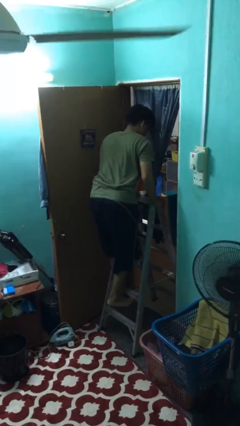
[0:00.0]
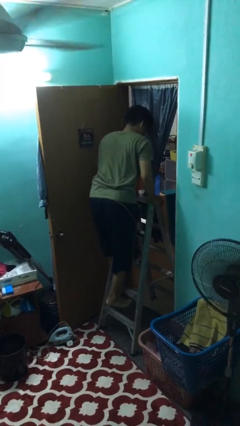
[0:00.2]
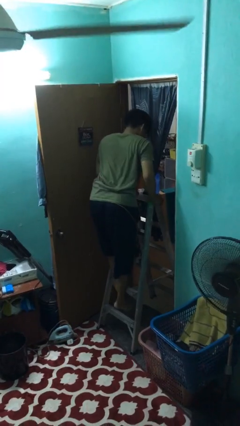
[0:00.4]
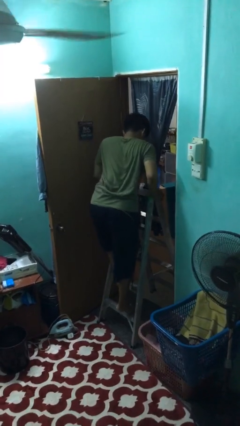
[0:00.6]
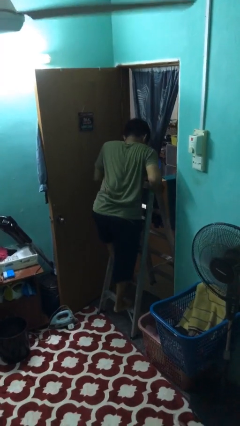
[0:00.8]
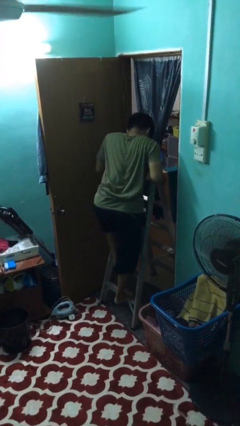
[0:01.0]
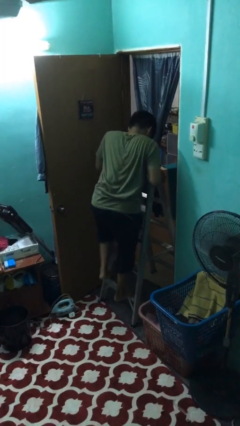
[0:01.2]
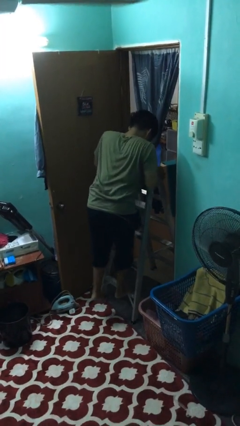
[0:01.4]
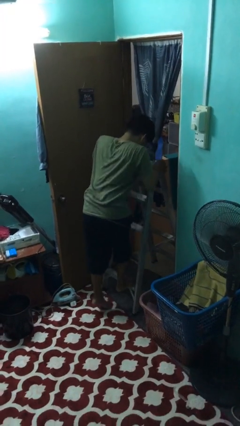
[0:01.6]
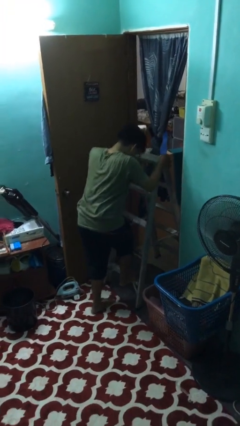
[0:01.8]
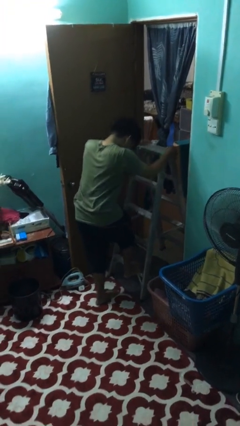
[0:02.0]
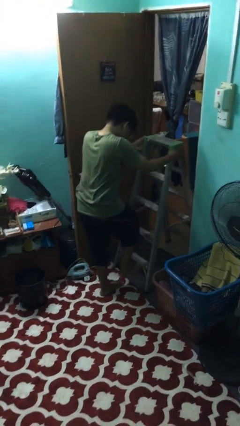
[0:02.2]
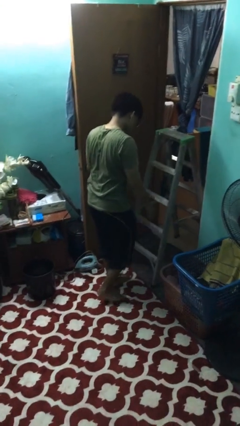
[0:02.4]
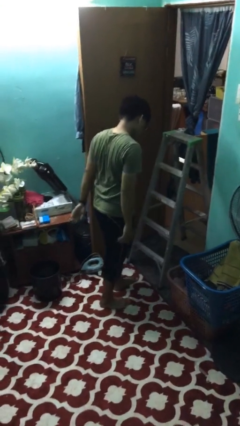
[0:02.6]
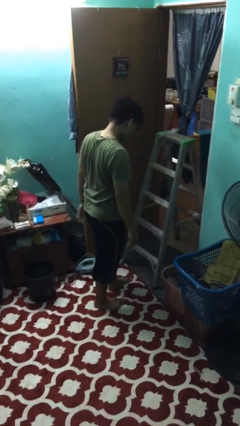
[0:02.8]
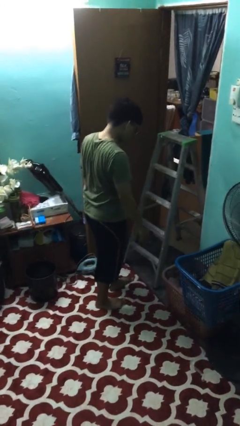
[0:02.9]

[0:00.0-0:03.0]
person climbs down ladder

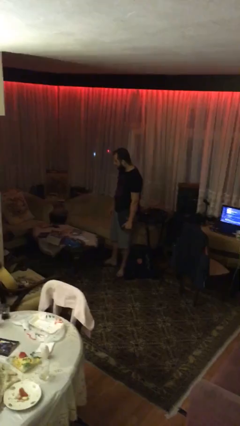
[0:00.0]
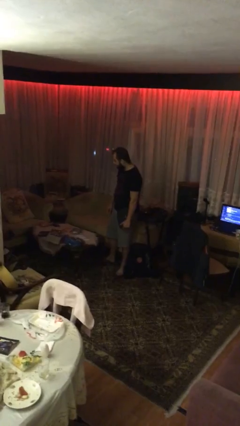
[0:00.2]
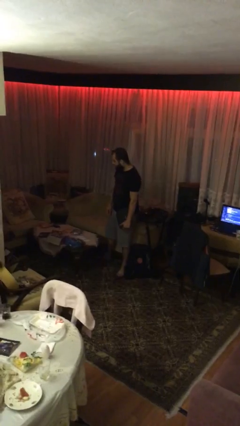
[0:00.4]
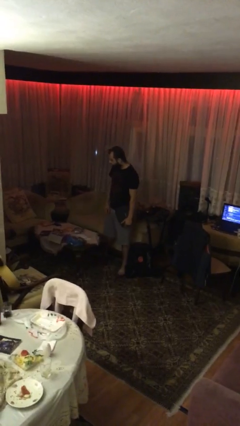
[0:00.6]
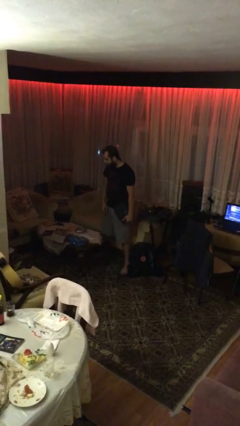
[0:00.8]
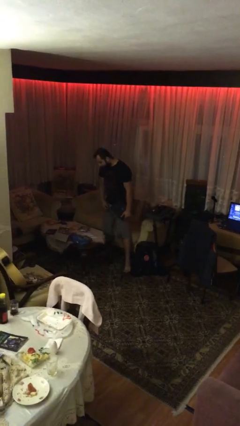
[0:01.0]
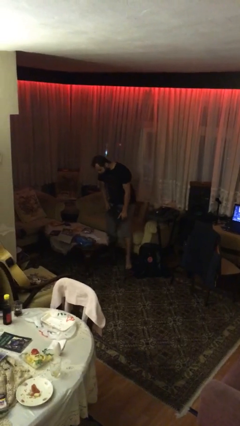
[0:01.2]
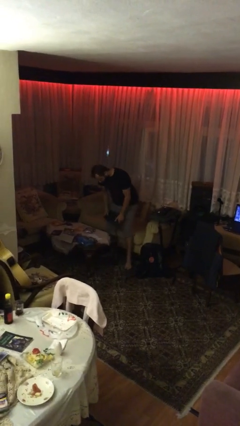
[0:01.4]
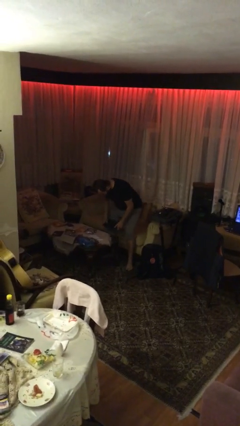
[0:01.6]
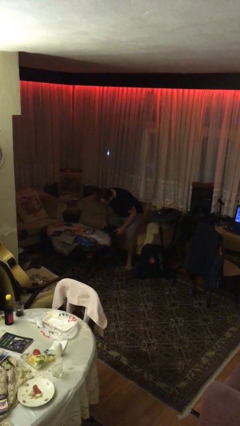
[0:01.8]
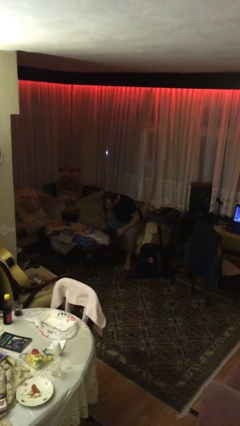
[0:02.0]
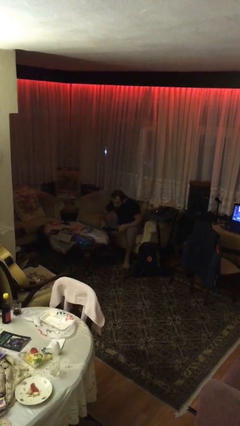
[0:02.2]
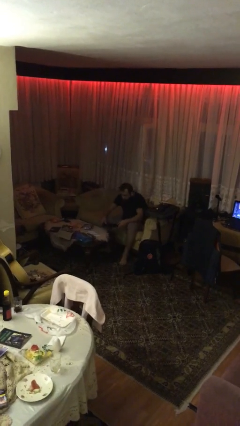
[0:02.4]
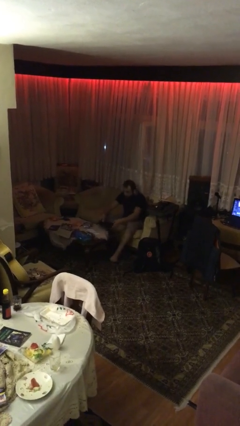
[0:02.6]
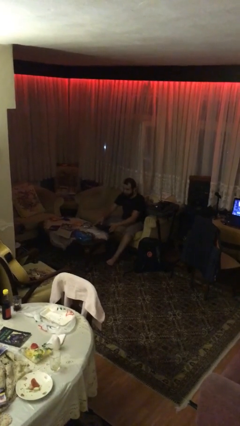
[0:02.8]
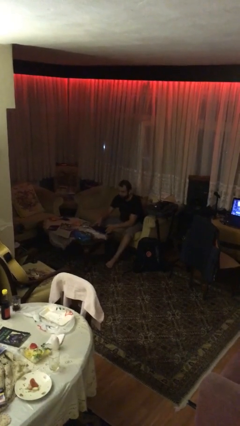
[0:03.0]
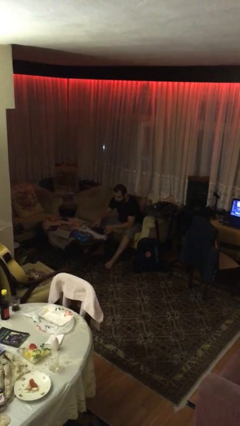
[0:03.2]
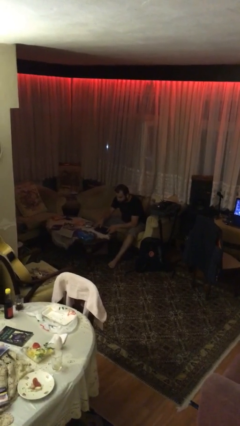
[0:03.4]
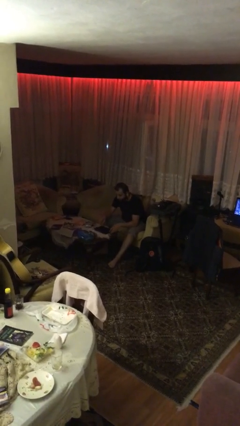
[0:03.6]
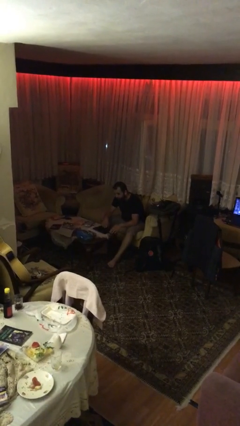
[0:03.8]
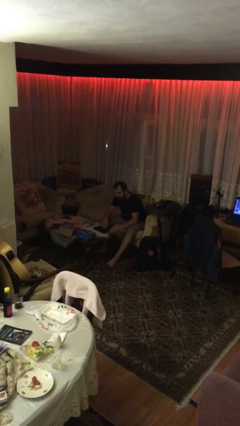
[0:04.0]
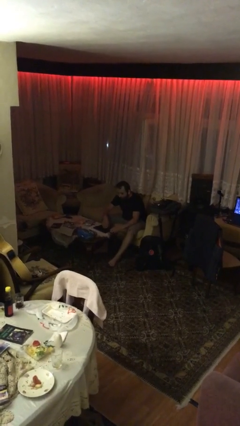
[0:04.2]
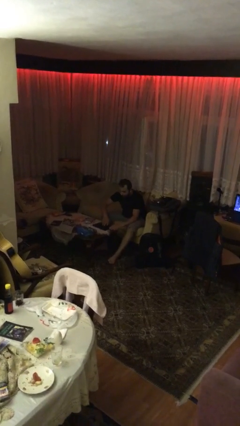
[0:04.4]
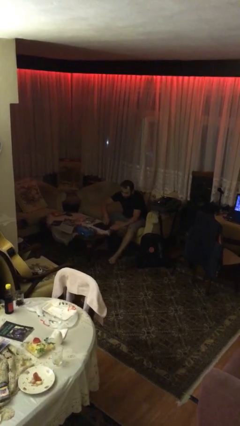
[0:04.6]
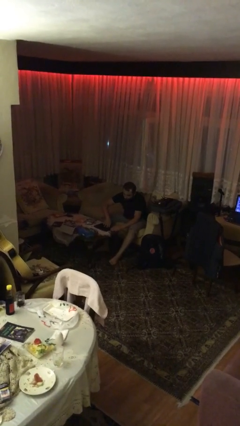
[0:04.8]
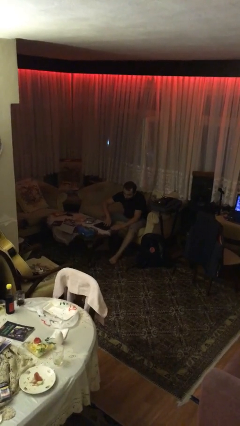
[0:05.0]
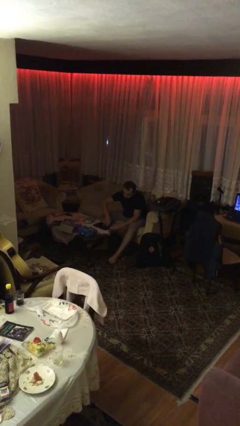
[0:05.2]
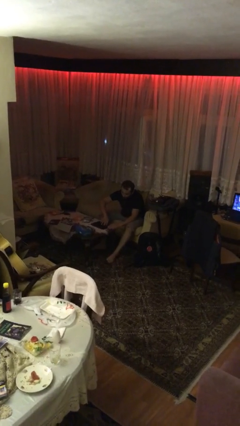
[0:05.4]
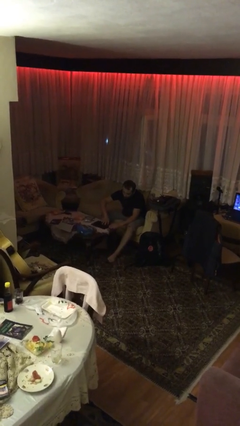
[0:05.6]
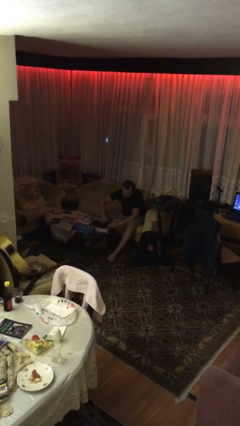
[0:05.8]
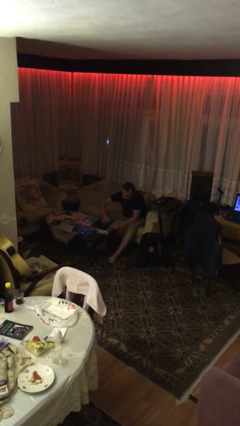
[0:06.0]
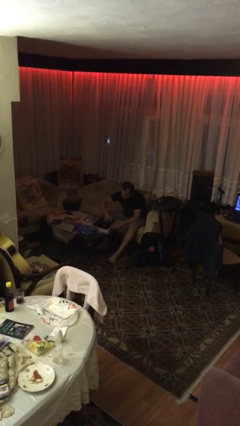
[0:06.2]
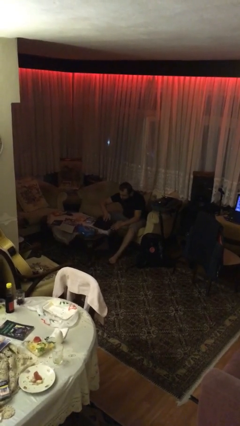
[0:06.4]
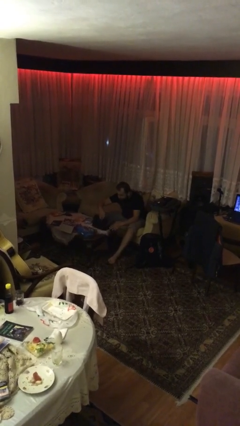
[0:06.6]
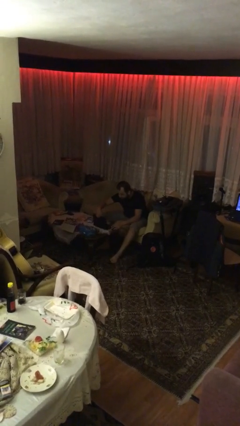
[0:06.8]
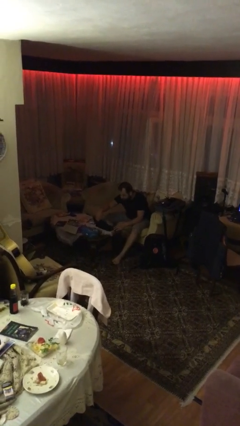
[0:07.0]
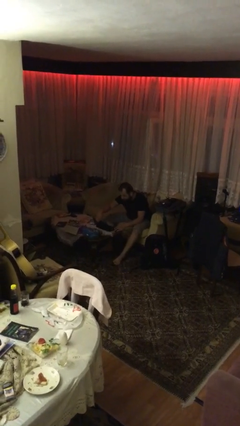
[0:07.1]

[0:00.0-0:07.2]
person sits down

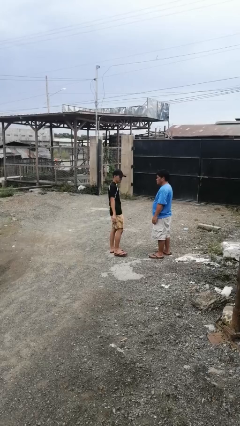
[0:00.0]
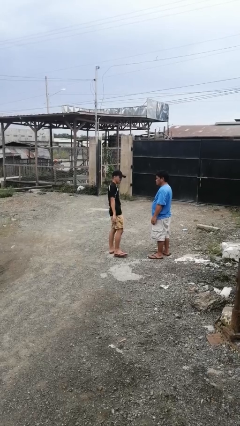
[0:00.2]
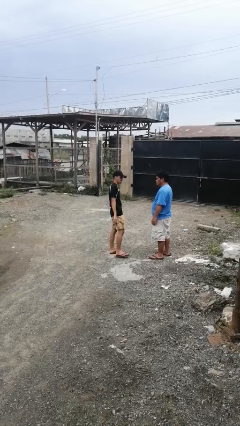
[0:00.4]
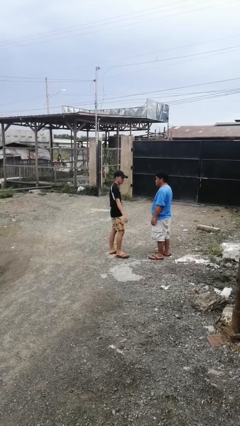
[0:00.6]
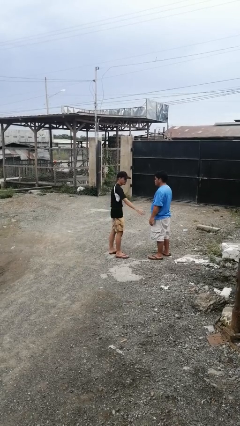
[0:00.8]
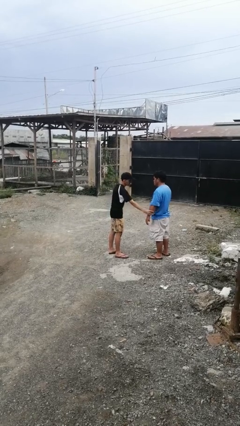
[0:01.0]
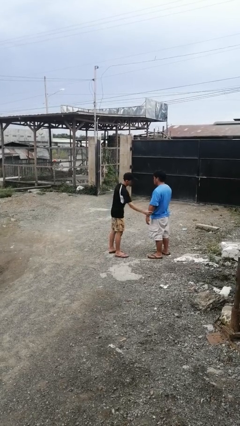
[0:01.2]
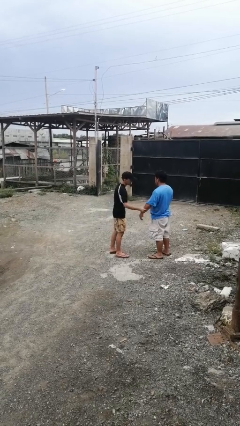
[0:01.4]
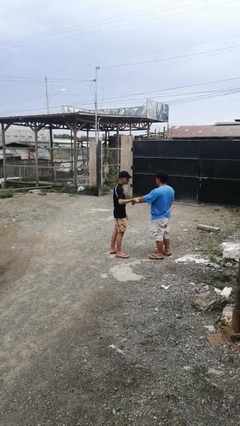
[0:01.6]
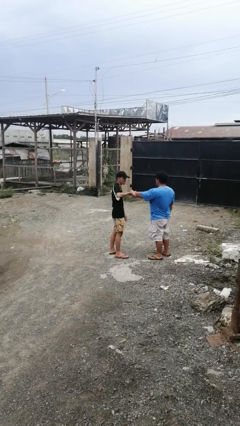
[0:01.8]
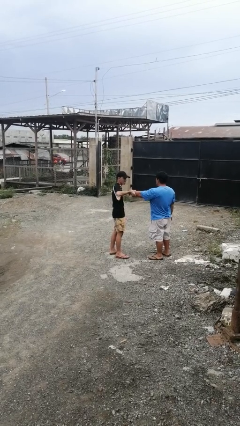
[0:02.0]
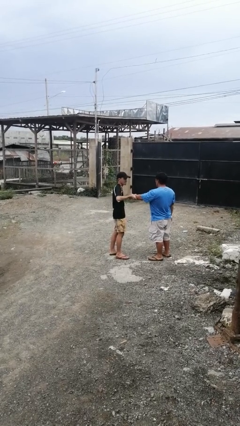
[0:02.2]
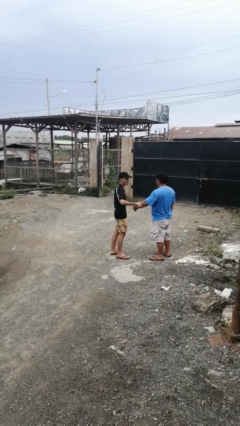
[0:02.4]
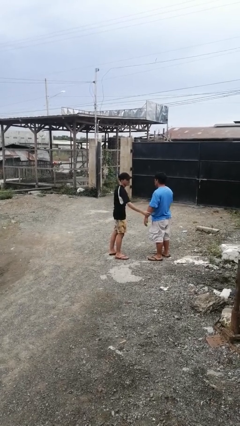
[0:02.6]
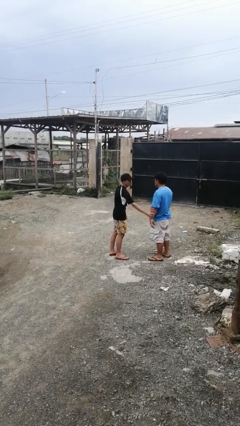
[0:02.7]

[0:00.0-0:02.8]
person grabs person by forearm

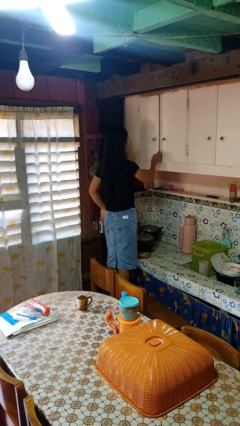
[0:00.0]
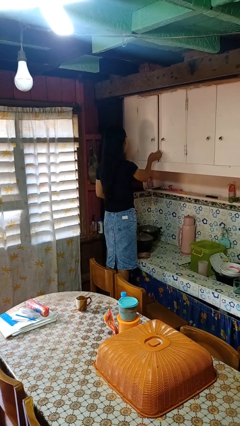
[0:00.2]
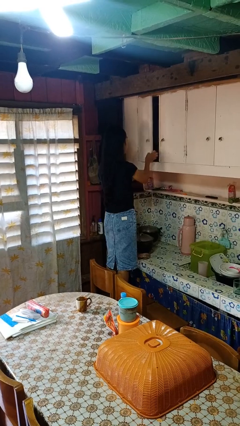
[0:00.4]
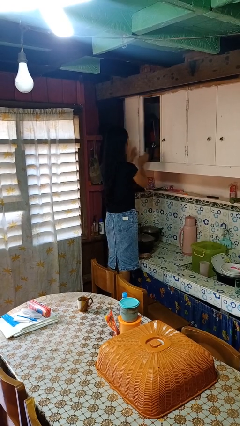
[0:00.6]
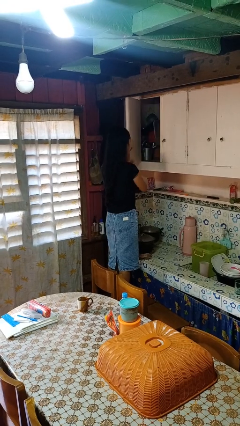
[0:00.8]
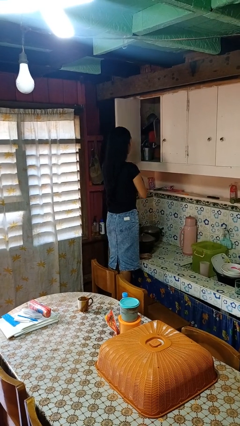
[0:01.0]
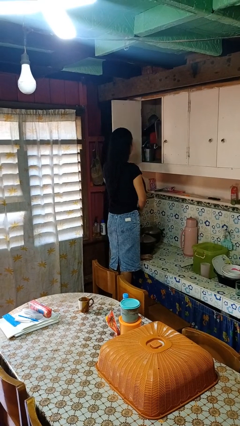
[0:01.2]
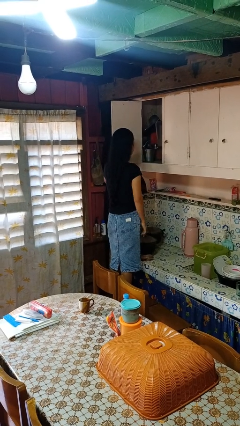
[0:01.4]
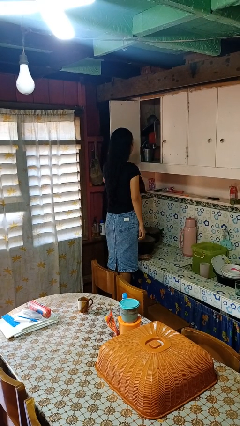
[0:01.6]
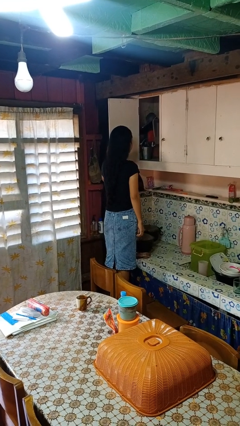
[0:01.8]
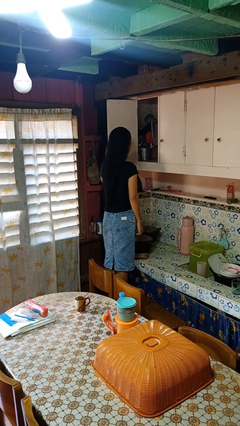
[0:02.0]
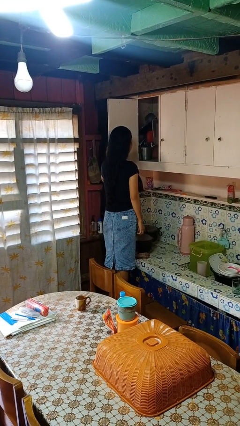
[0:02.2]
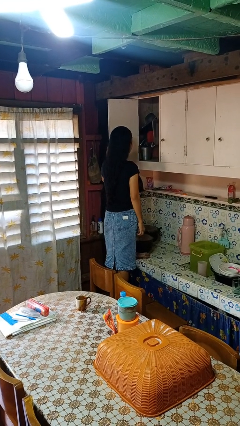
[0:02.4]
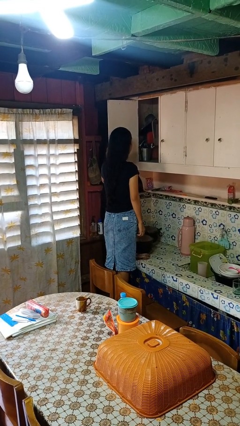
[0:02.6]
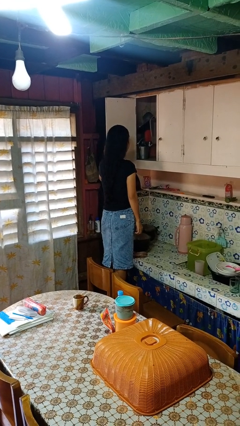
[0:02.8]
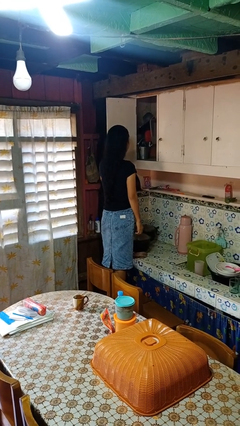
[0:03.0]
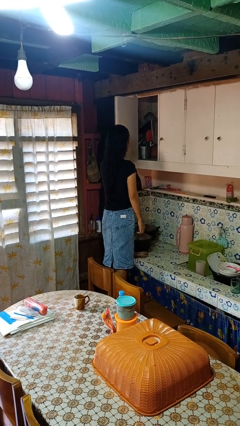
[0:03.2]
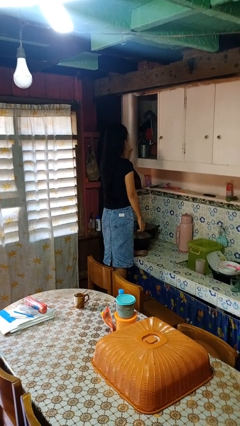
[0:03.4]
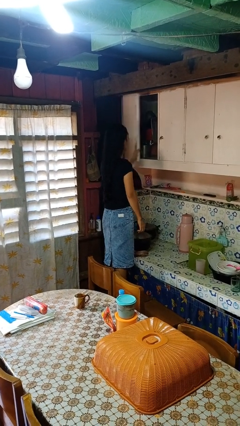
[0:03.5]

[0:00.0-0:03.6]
person opens cabinet

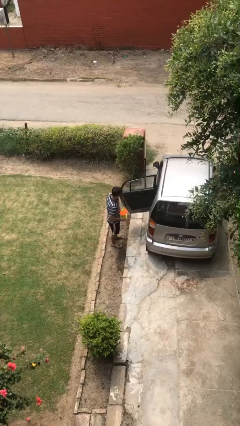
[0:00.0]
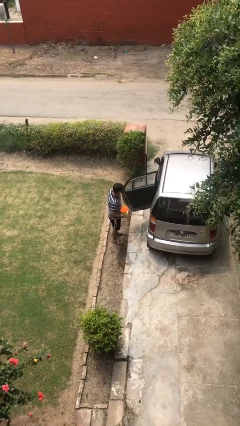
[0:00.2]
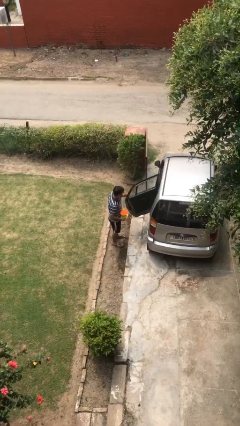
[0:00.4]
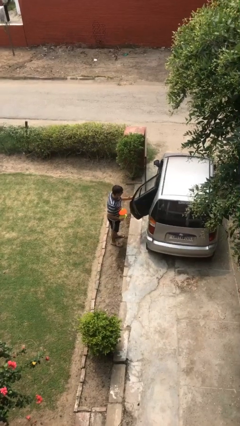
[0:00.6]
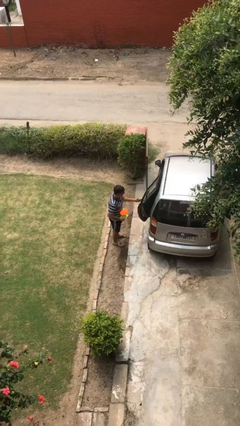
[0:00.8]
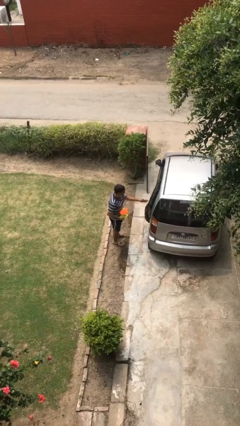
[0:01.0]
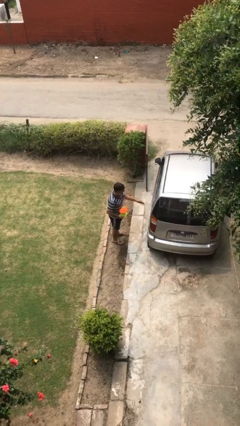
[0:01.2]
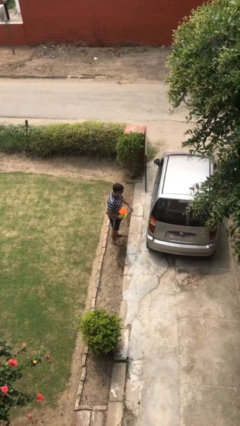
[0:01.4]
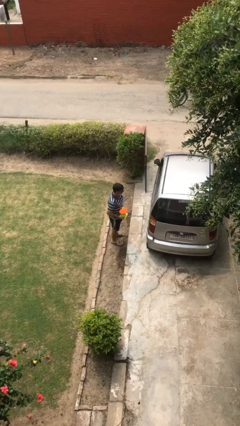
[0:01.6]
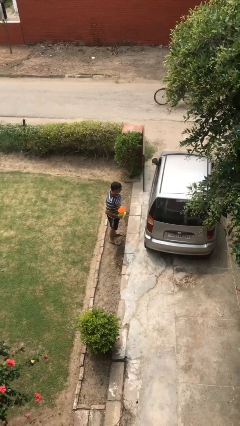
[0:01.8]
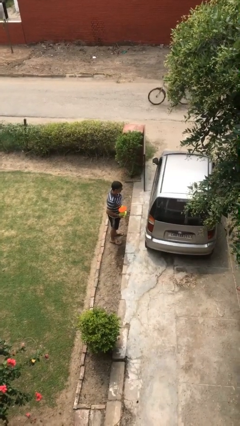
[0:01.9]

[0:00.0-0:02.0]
person closes car door
